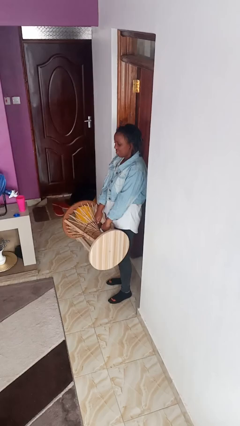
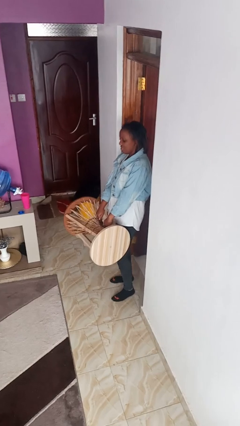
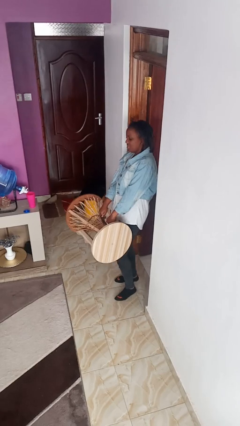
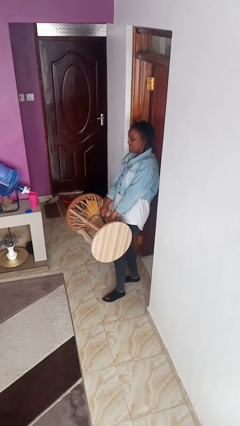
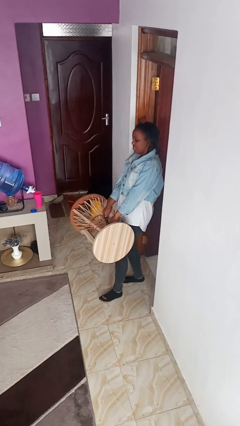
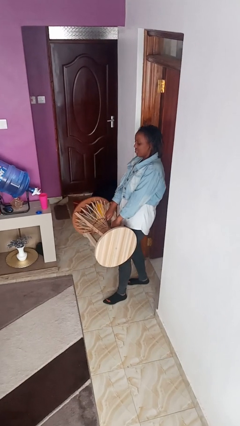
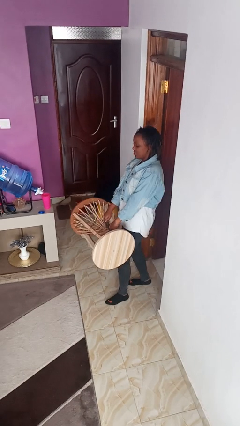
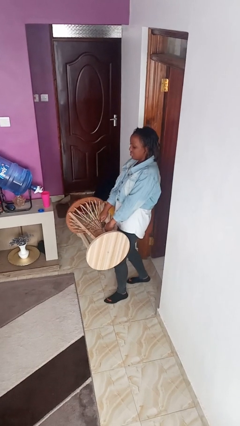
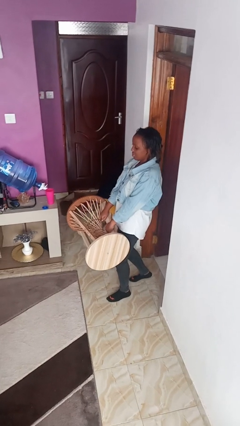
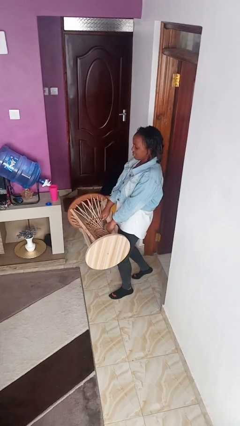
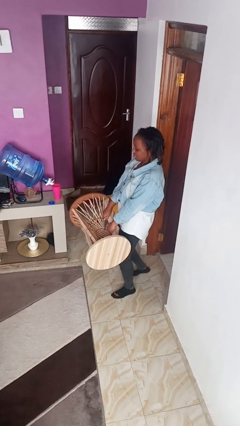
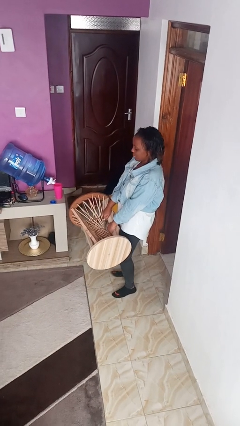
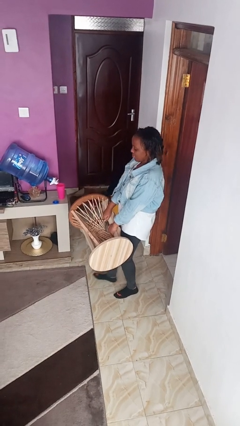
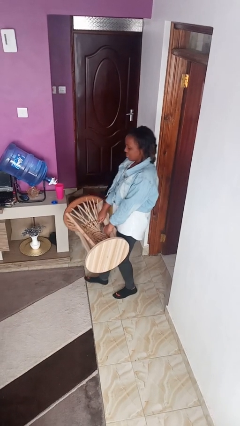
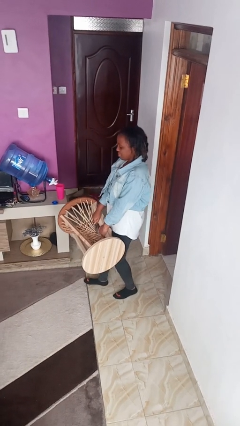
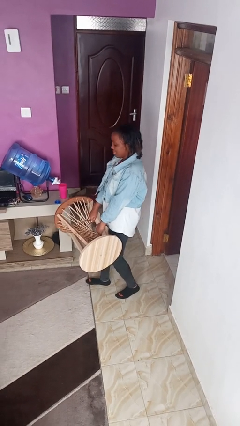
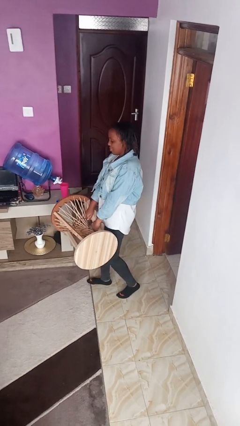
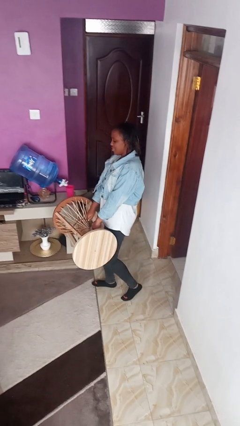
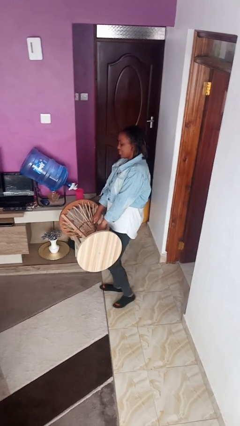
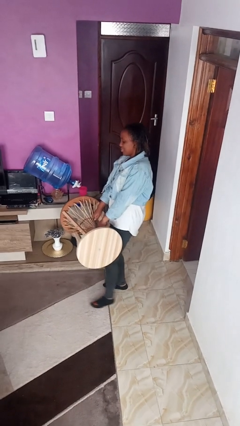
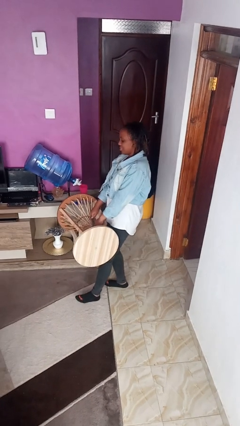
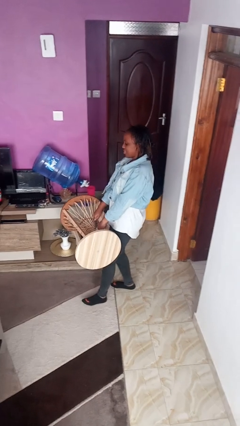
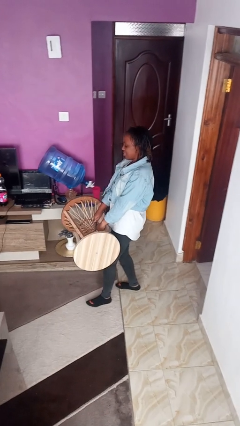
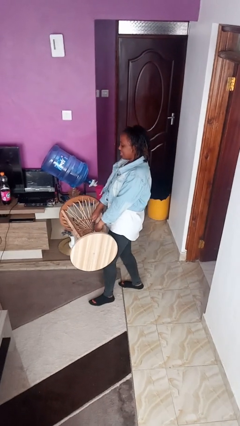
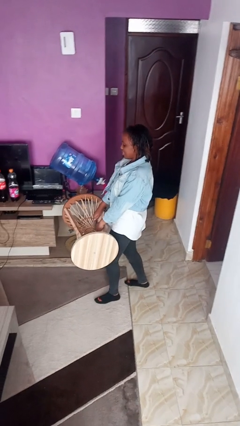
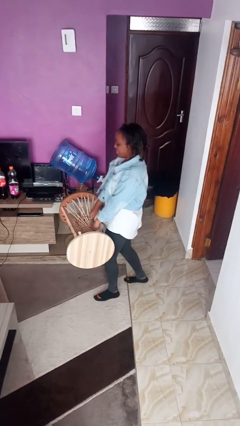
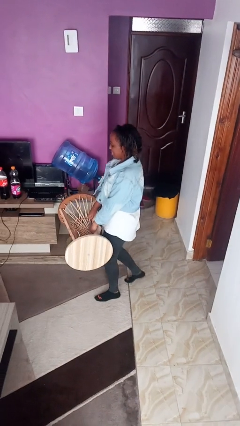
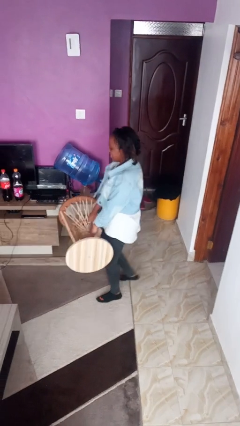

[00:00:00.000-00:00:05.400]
person carries furniture

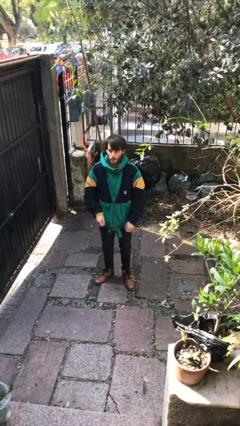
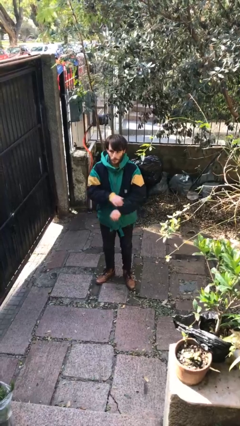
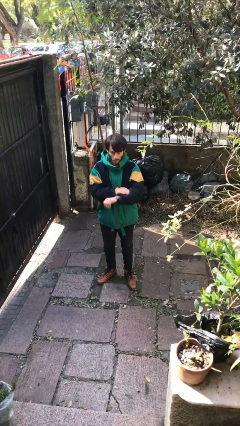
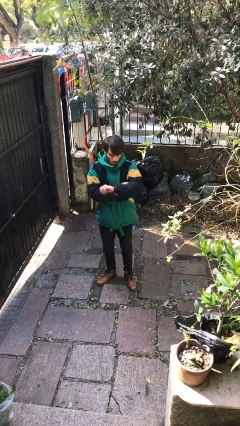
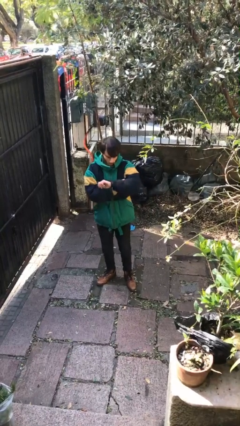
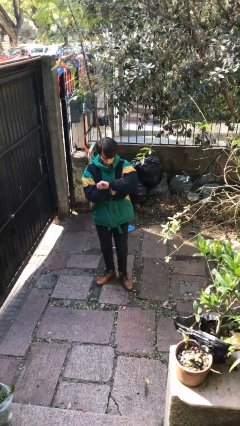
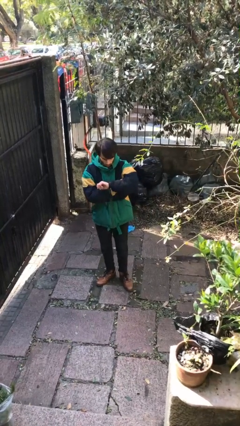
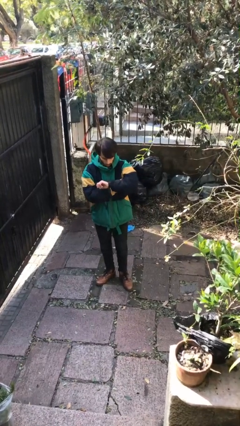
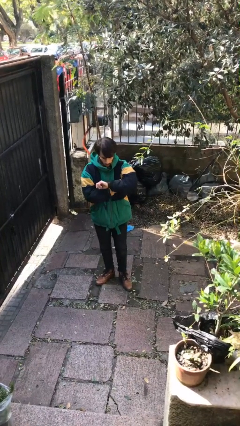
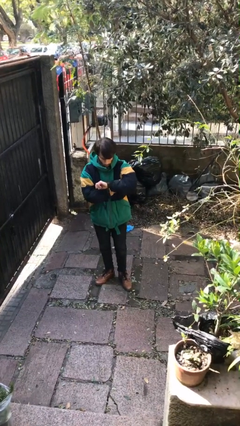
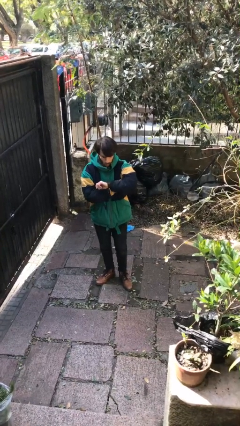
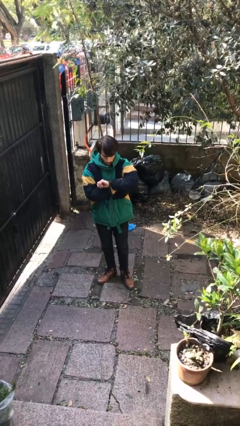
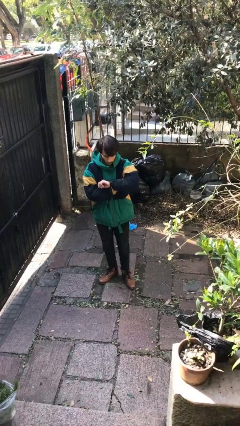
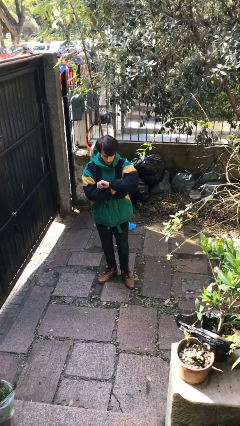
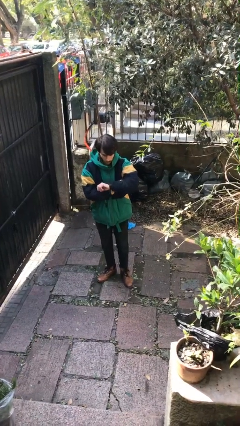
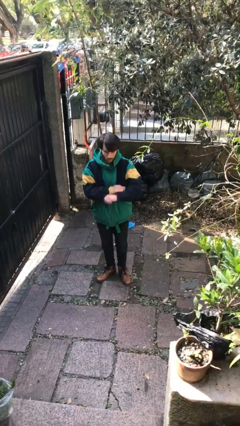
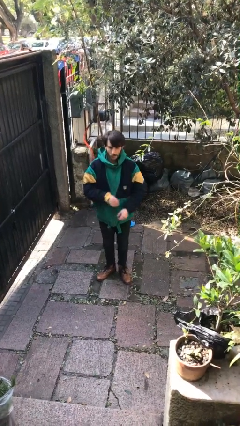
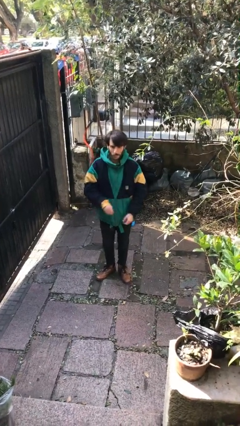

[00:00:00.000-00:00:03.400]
person looks at wristwatch

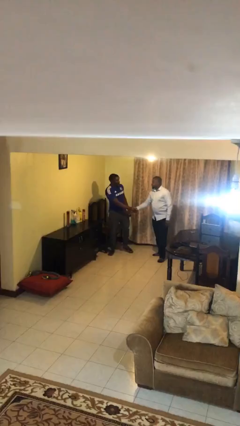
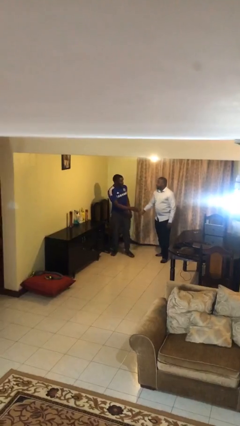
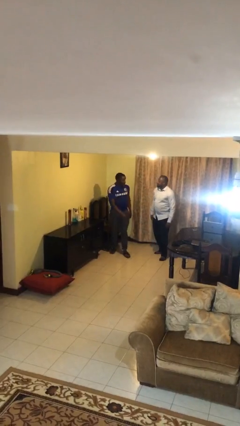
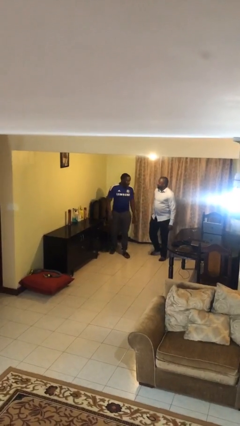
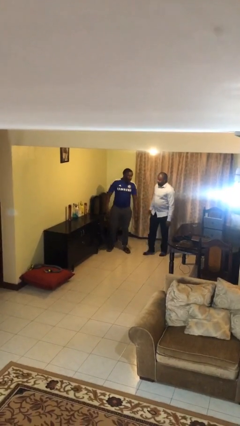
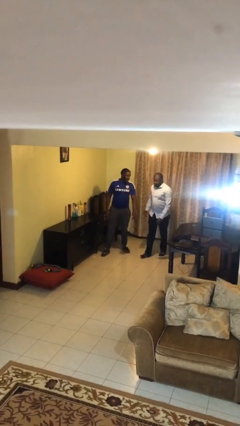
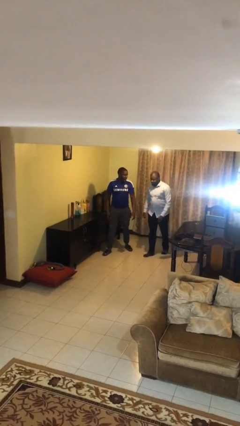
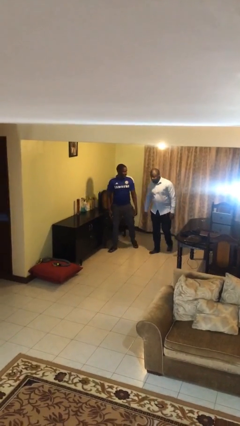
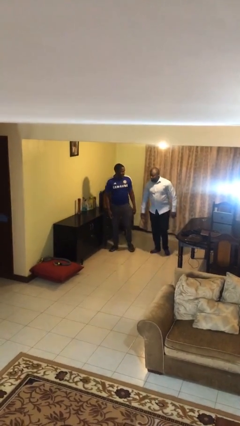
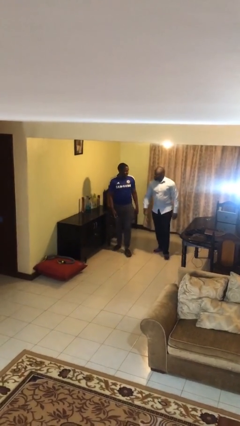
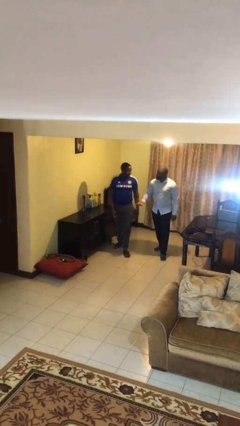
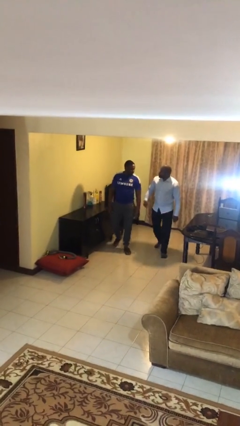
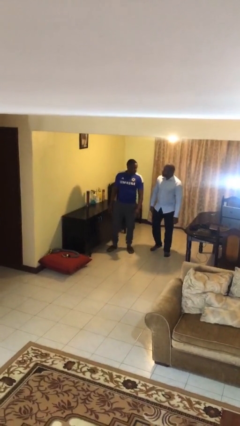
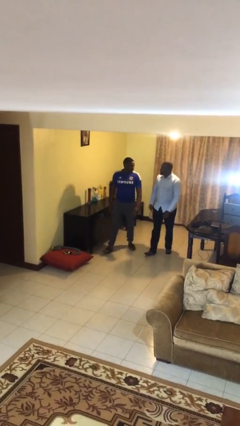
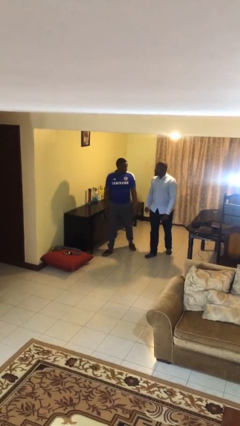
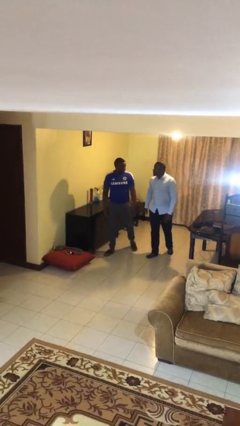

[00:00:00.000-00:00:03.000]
person talks to person

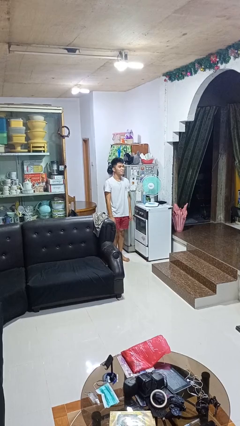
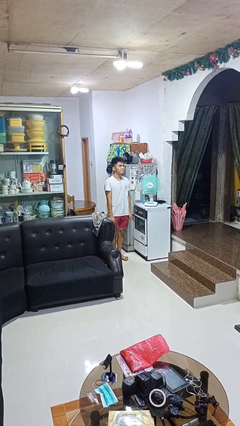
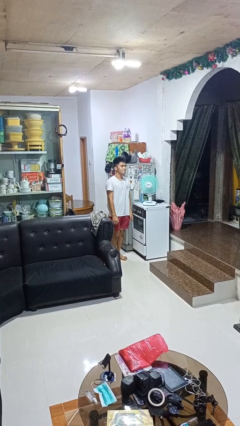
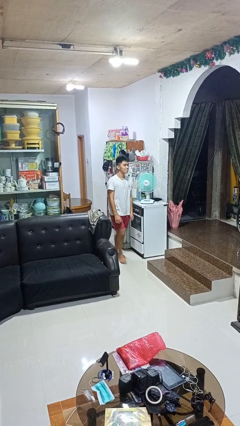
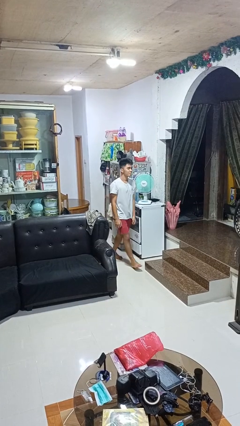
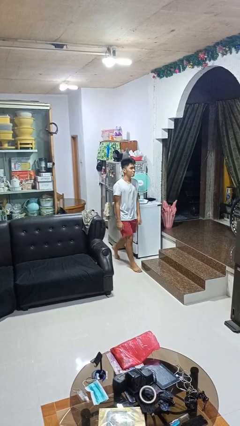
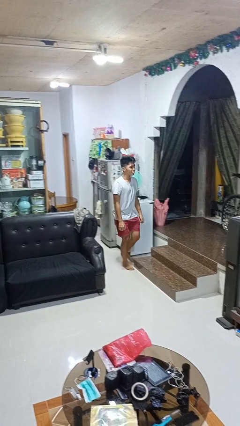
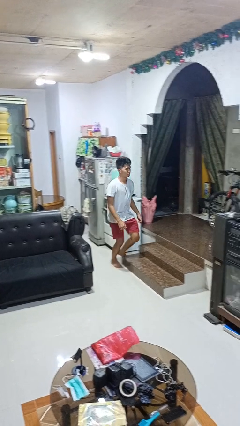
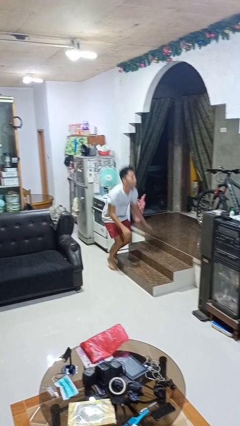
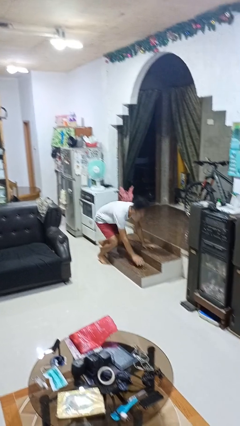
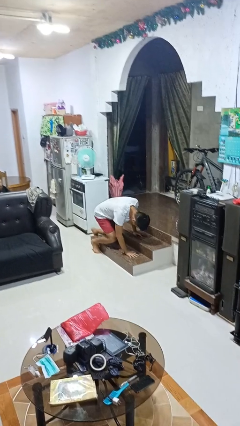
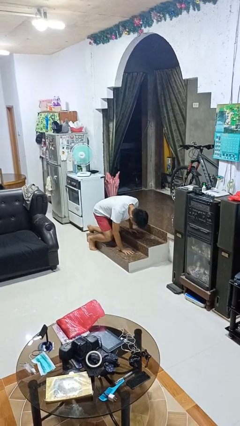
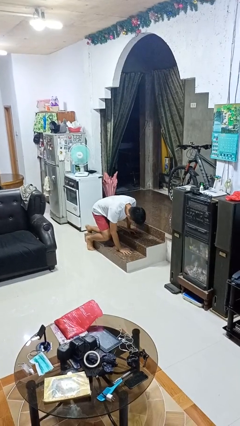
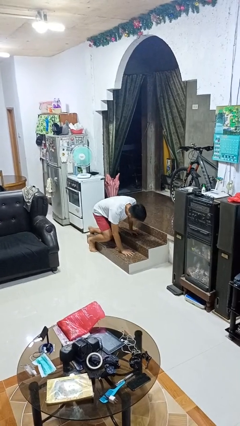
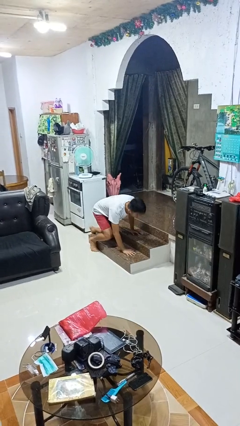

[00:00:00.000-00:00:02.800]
person trips on object on floor

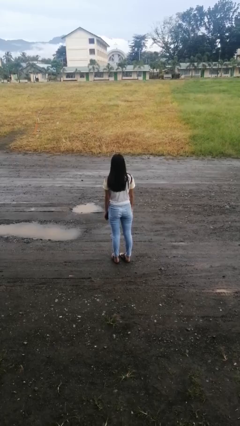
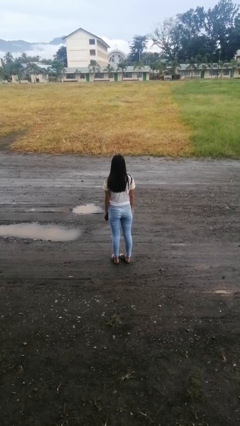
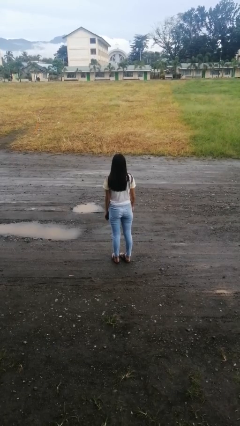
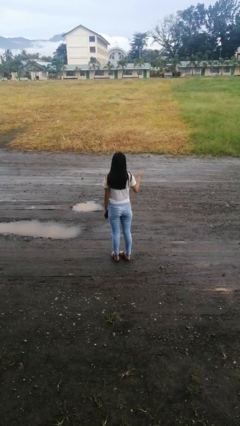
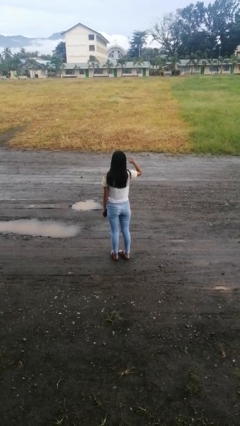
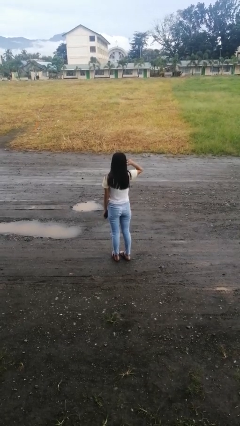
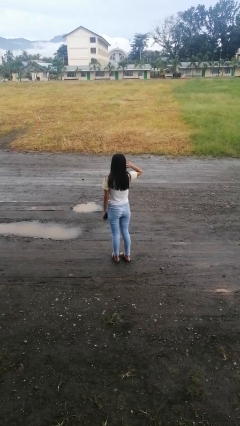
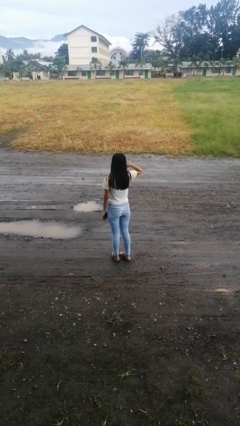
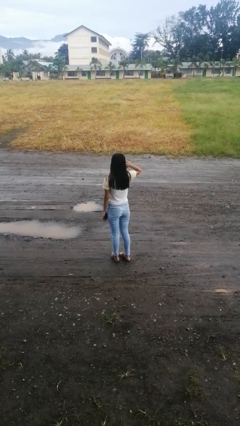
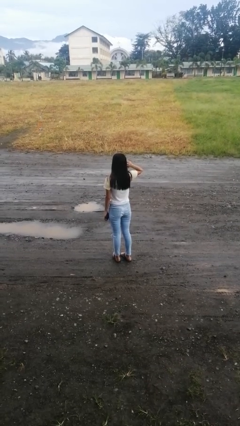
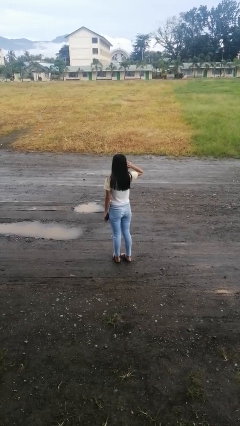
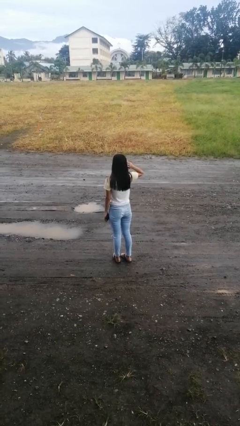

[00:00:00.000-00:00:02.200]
person scratches face

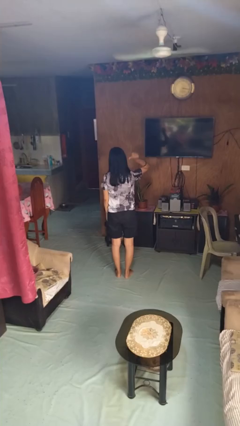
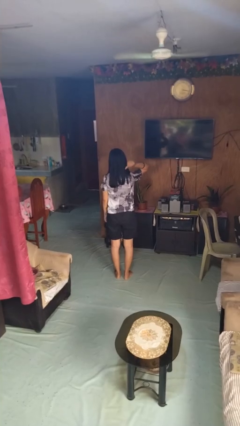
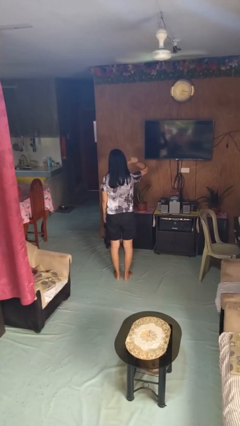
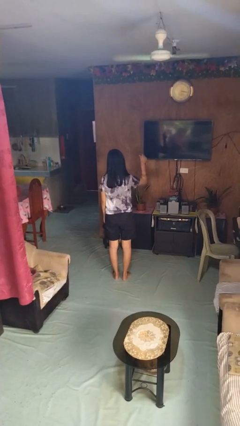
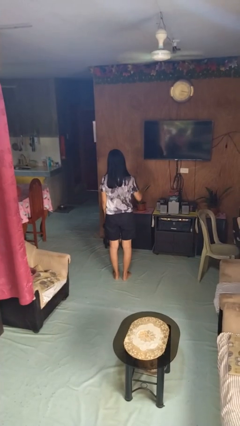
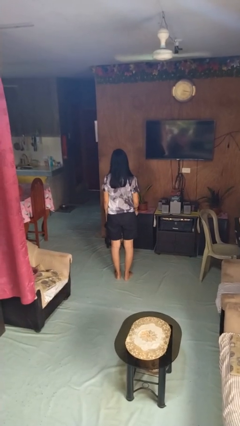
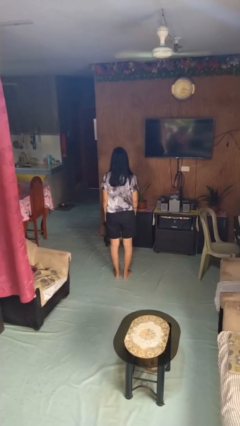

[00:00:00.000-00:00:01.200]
person gestures behind me
